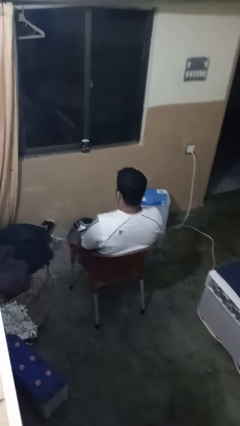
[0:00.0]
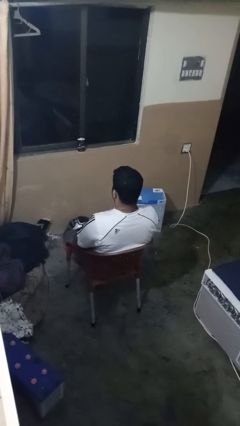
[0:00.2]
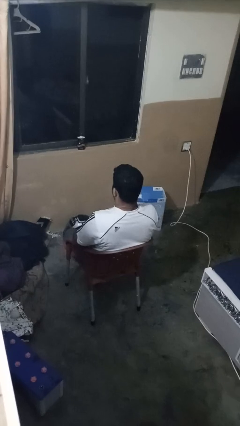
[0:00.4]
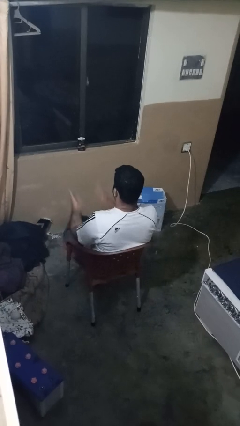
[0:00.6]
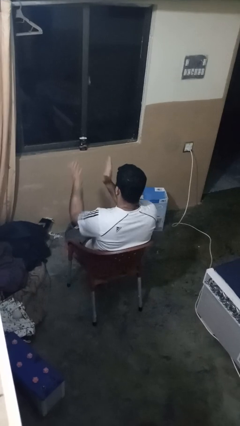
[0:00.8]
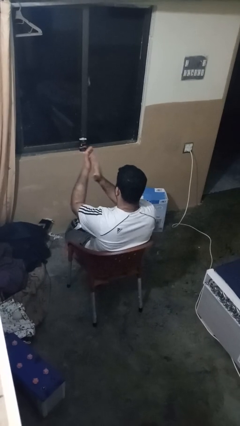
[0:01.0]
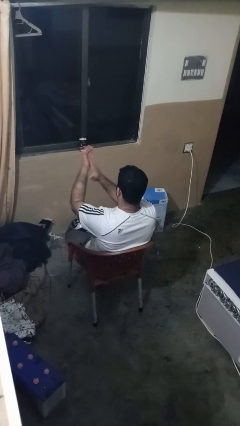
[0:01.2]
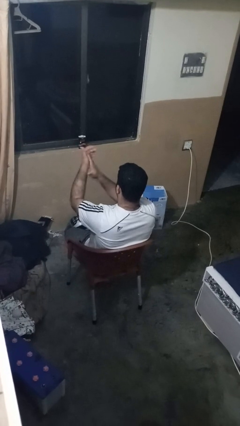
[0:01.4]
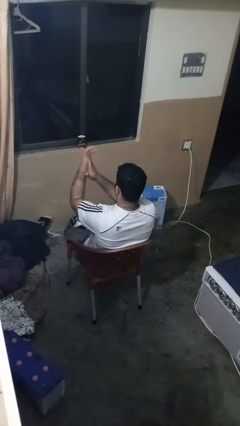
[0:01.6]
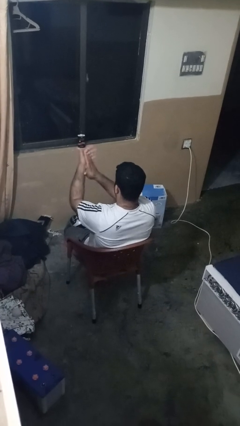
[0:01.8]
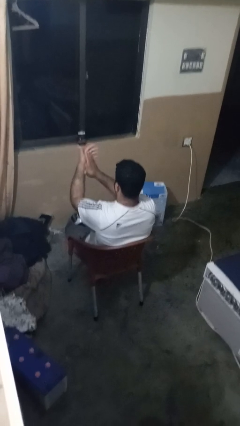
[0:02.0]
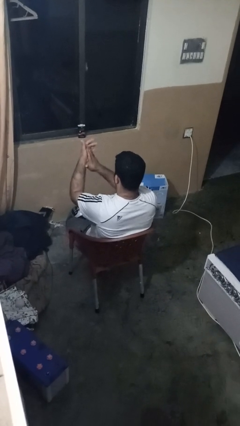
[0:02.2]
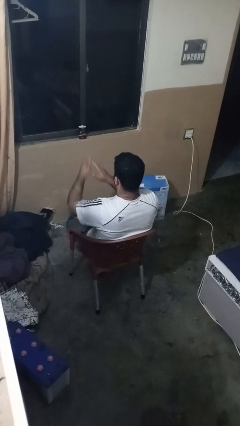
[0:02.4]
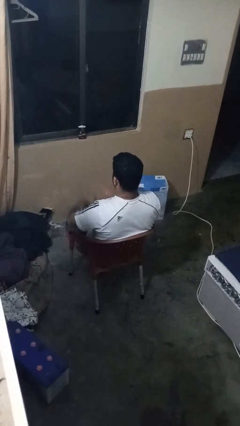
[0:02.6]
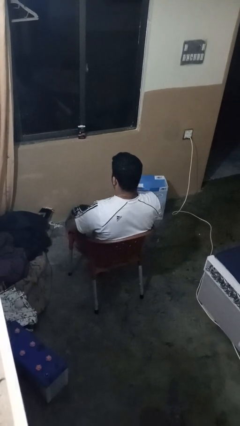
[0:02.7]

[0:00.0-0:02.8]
person slaps hands on thighs

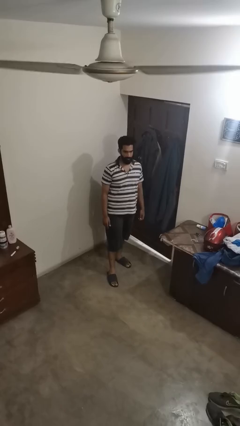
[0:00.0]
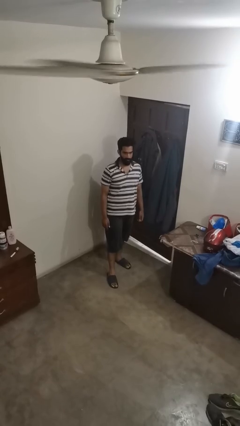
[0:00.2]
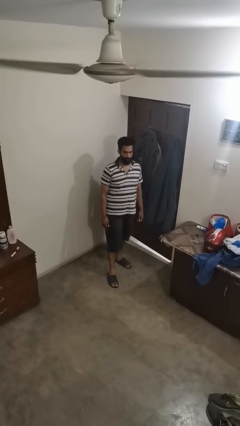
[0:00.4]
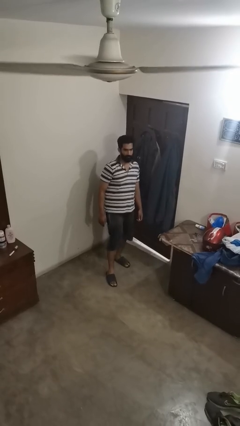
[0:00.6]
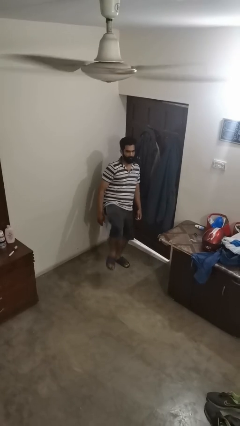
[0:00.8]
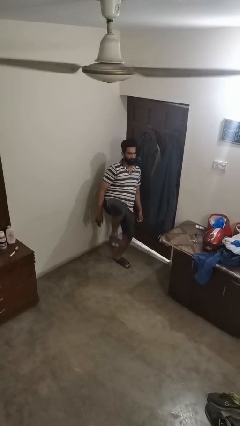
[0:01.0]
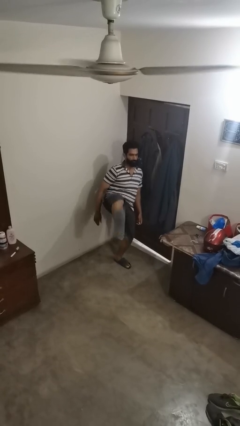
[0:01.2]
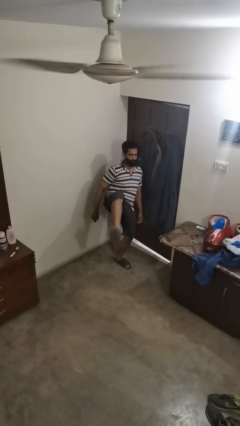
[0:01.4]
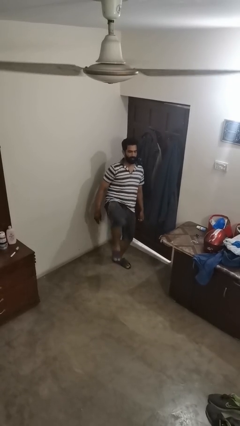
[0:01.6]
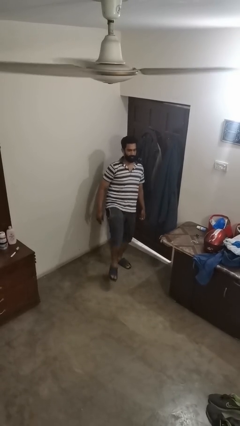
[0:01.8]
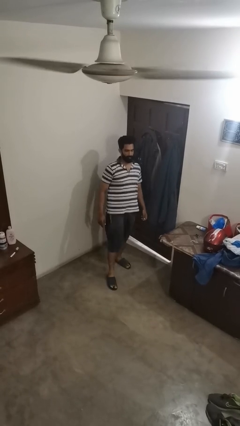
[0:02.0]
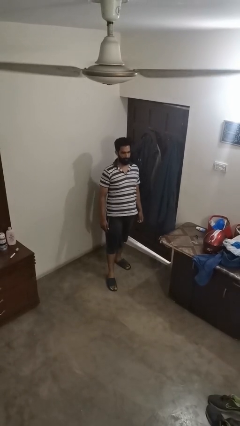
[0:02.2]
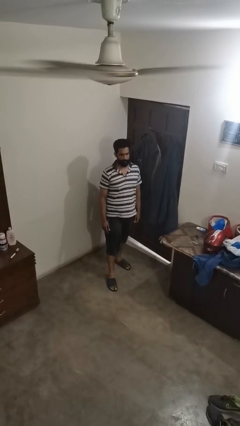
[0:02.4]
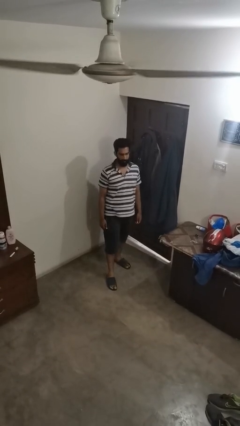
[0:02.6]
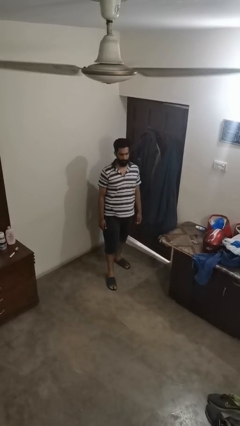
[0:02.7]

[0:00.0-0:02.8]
person karate kicks

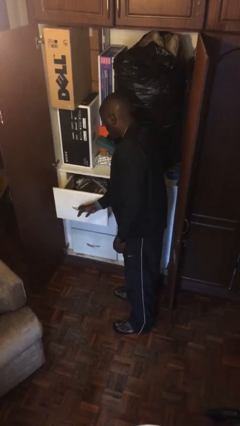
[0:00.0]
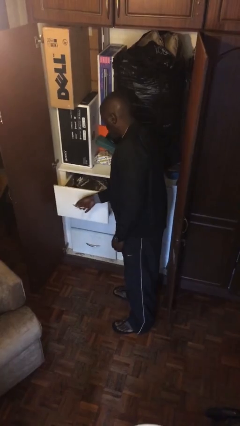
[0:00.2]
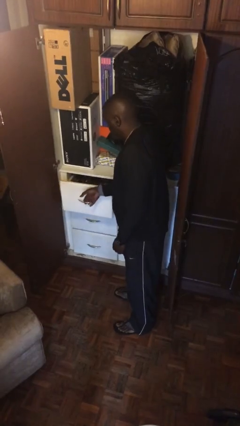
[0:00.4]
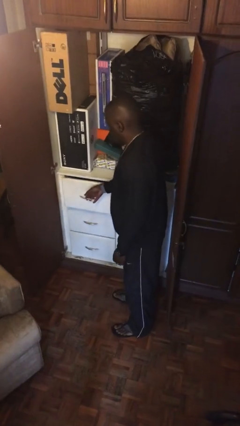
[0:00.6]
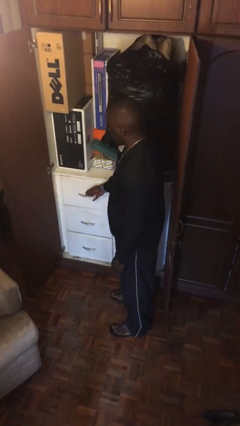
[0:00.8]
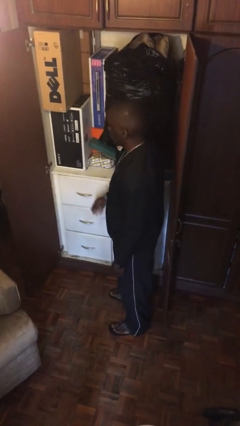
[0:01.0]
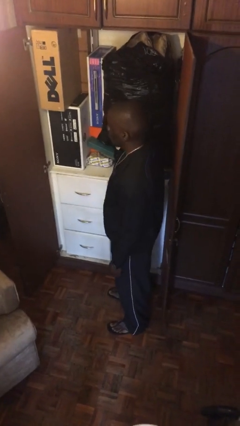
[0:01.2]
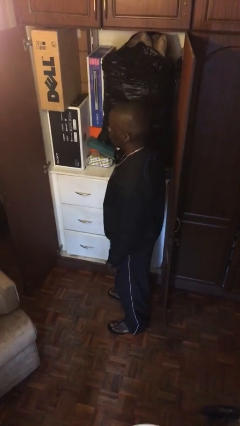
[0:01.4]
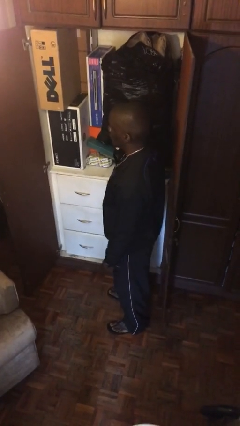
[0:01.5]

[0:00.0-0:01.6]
person closes dresser drawer

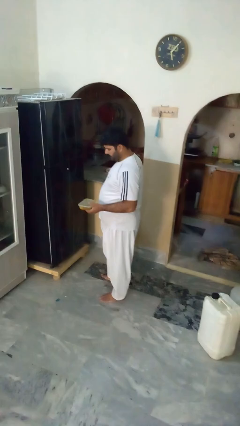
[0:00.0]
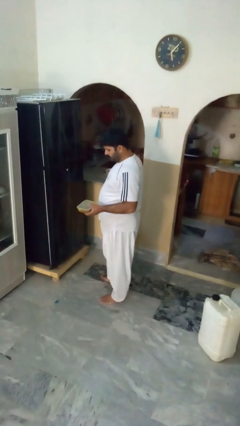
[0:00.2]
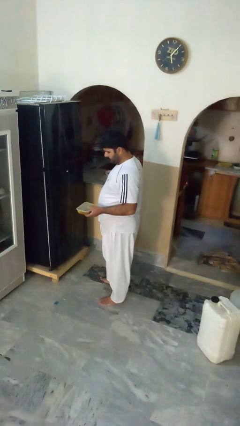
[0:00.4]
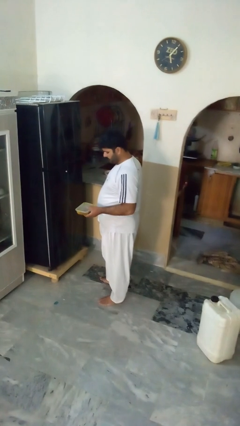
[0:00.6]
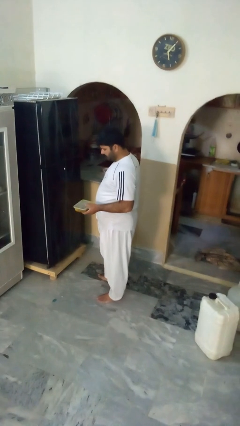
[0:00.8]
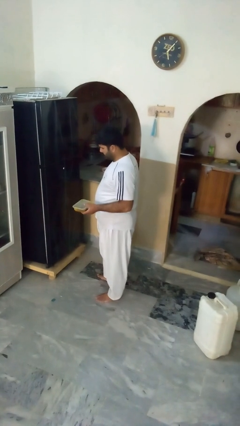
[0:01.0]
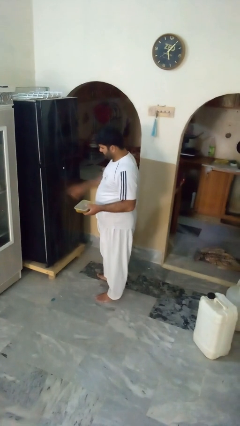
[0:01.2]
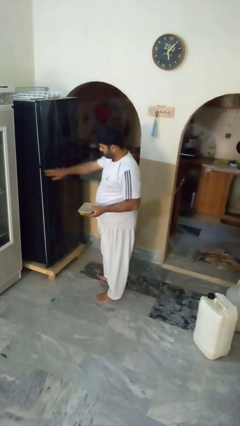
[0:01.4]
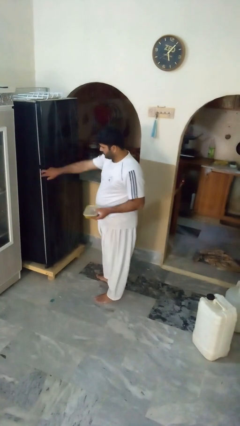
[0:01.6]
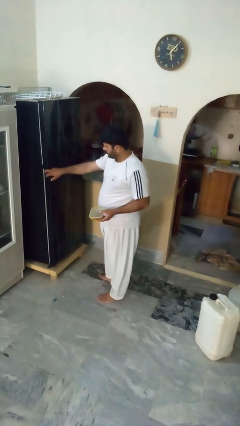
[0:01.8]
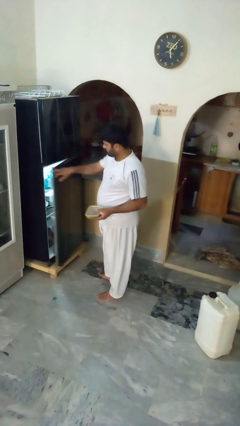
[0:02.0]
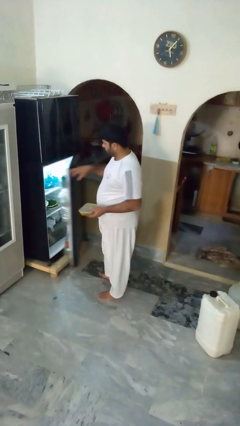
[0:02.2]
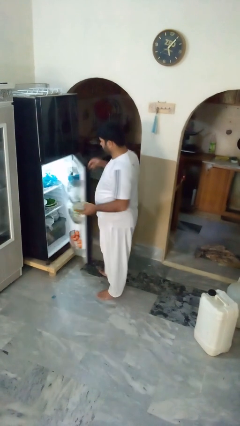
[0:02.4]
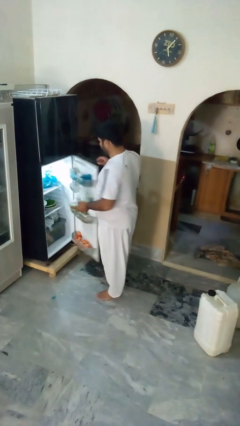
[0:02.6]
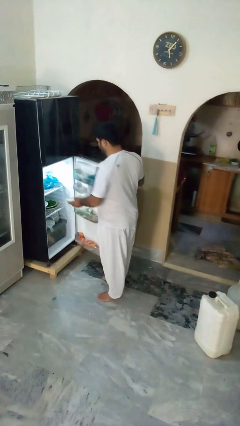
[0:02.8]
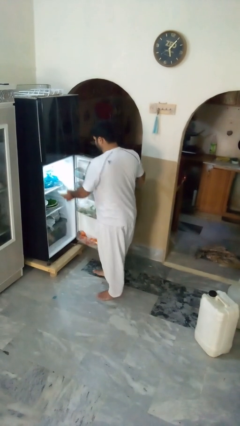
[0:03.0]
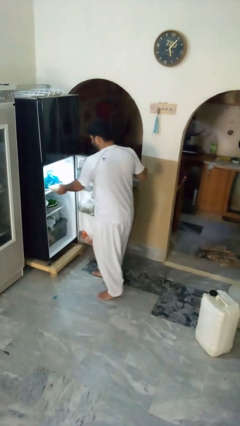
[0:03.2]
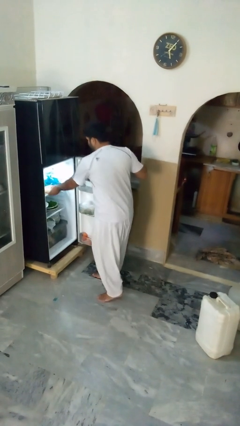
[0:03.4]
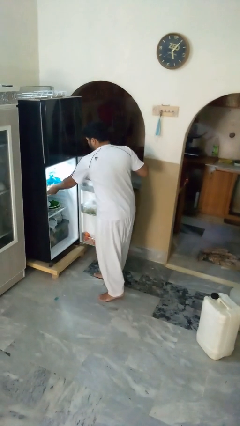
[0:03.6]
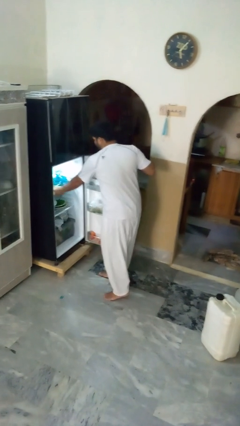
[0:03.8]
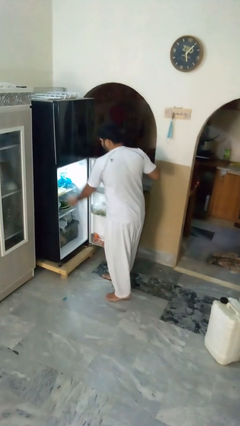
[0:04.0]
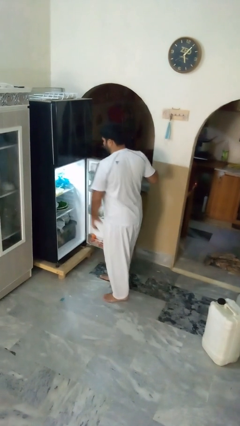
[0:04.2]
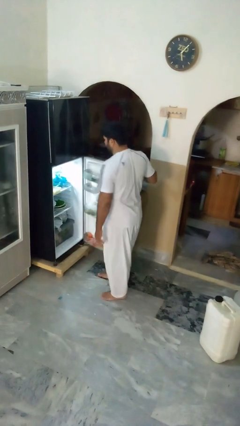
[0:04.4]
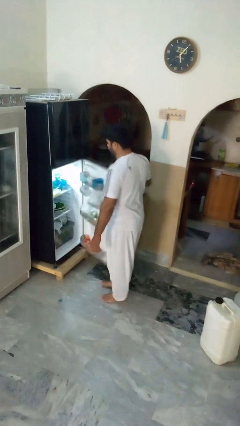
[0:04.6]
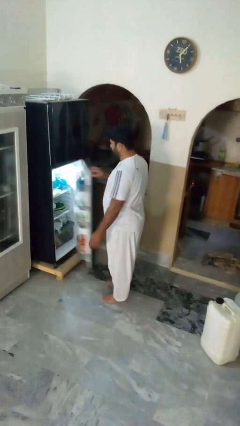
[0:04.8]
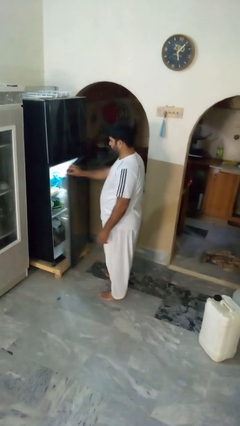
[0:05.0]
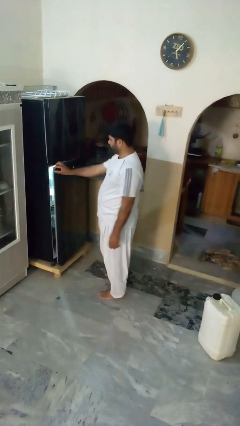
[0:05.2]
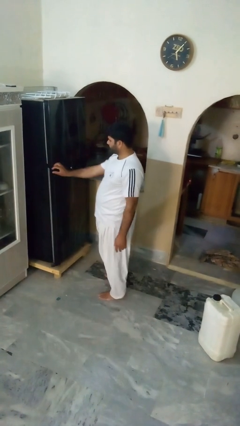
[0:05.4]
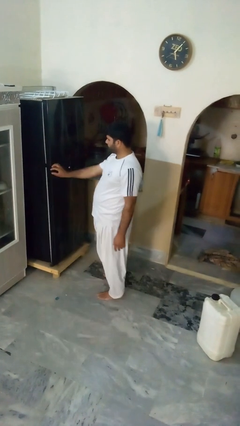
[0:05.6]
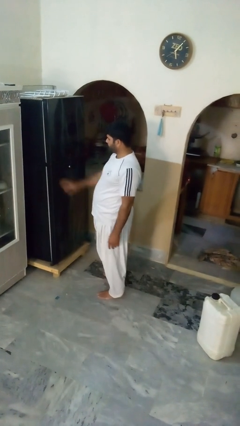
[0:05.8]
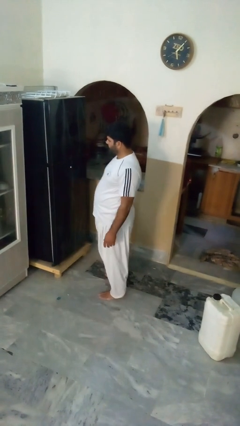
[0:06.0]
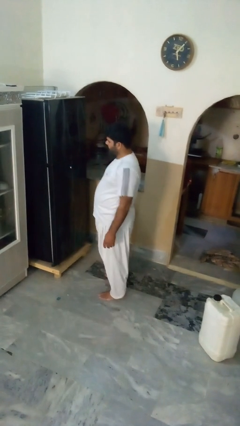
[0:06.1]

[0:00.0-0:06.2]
person puts object into refrigerator

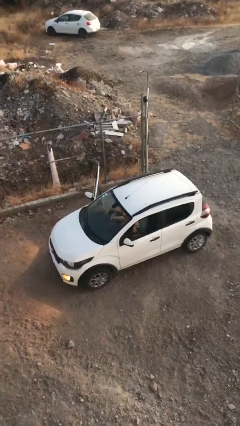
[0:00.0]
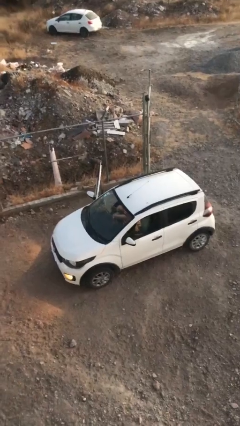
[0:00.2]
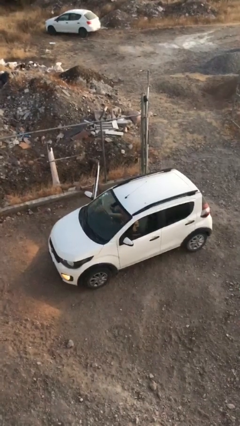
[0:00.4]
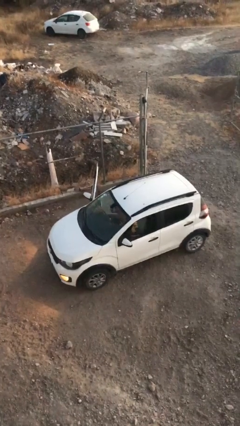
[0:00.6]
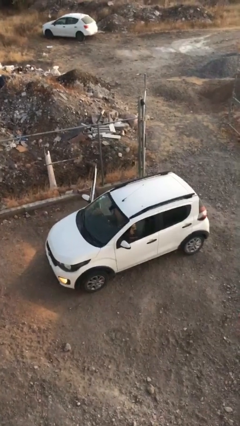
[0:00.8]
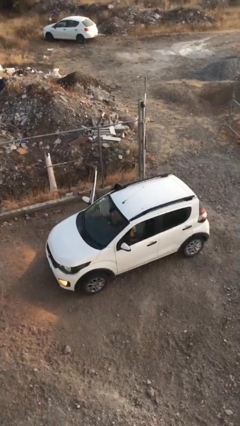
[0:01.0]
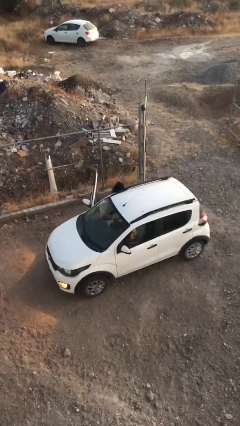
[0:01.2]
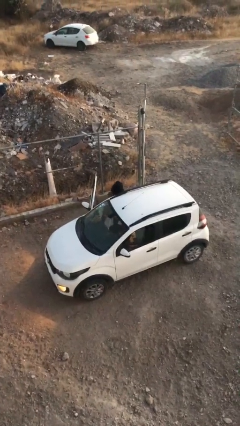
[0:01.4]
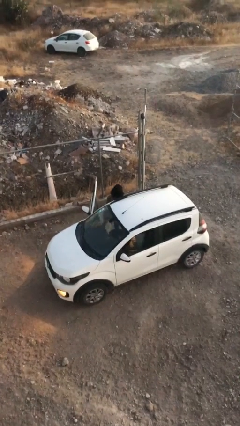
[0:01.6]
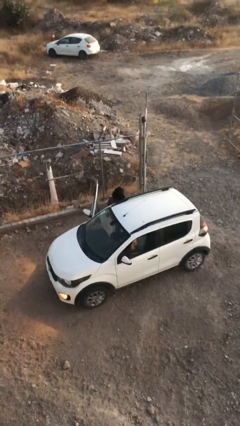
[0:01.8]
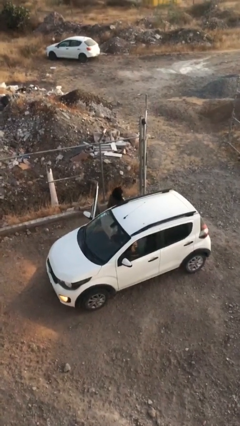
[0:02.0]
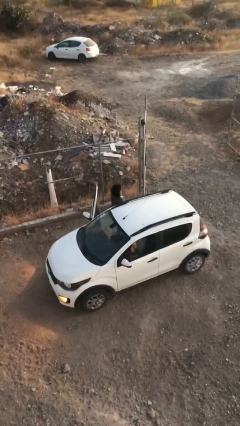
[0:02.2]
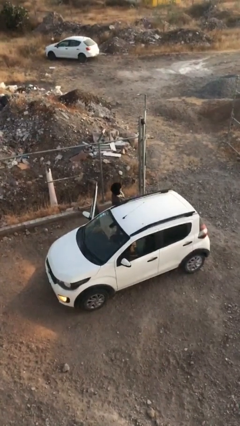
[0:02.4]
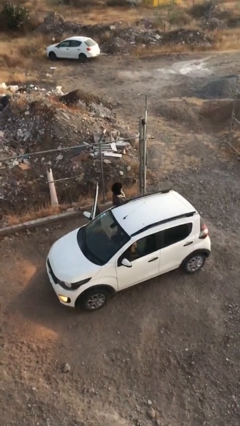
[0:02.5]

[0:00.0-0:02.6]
person exits car

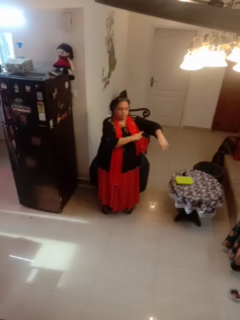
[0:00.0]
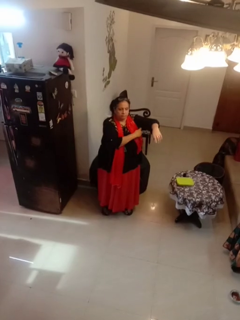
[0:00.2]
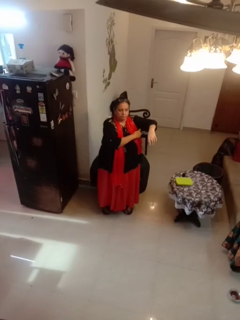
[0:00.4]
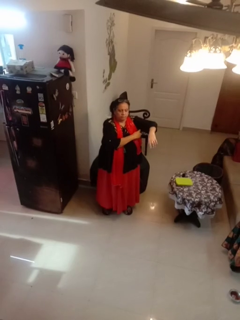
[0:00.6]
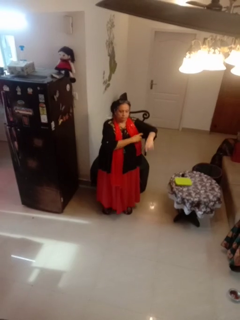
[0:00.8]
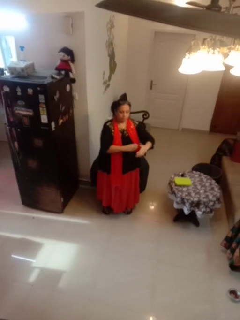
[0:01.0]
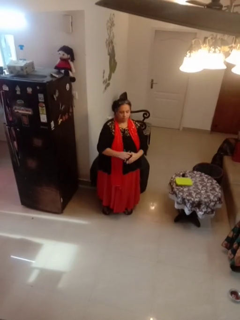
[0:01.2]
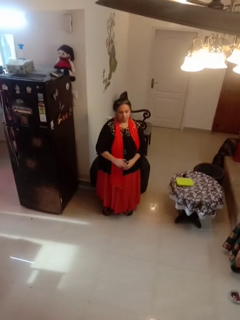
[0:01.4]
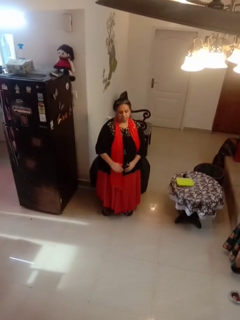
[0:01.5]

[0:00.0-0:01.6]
person applies deodorant
